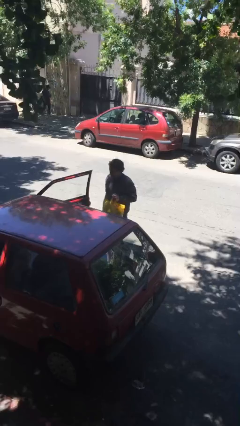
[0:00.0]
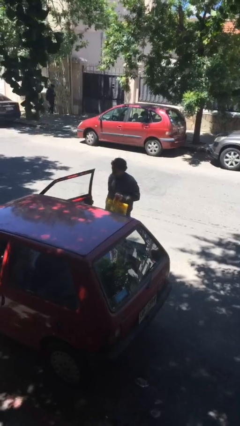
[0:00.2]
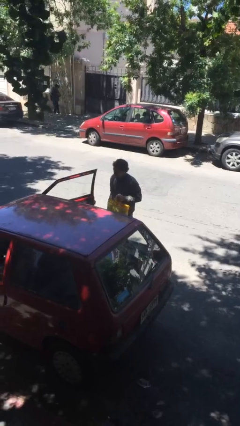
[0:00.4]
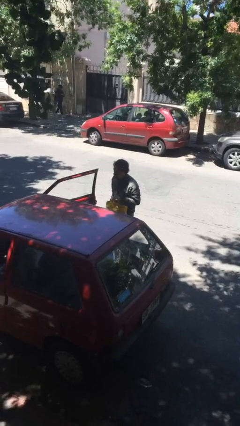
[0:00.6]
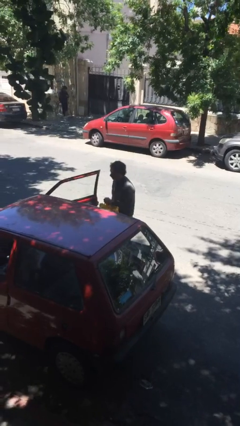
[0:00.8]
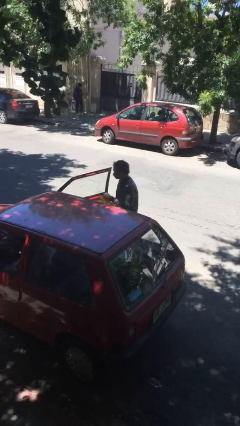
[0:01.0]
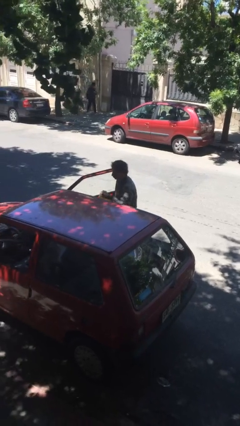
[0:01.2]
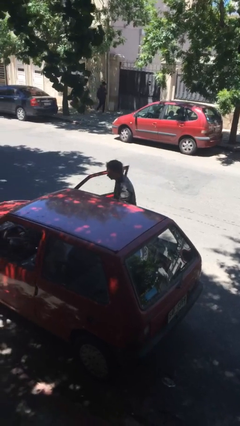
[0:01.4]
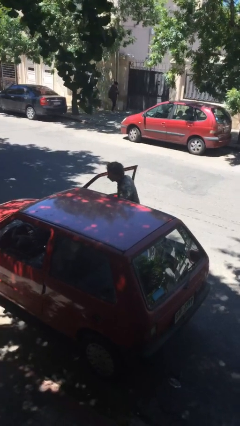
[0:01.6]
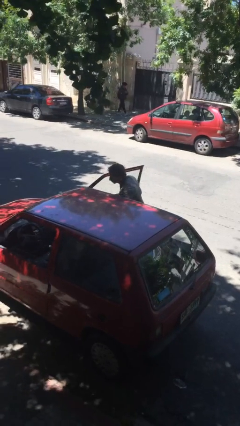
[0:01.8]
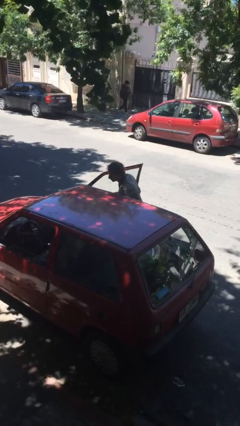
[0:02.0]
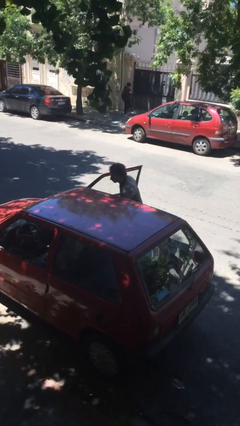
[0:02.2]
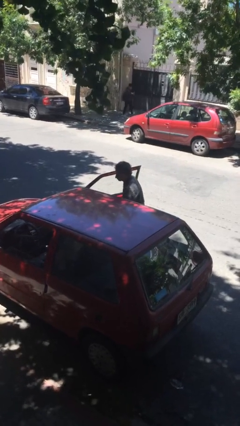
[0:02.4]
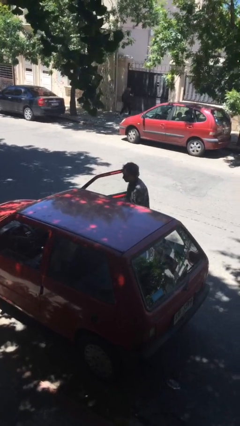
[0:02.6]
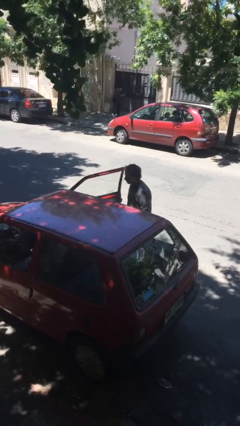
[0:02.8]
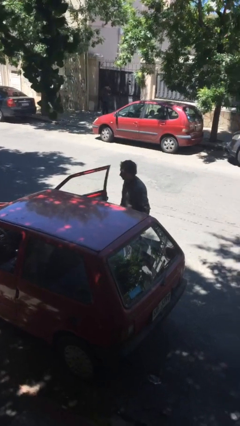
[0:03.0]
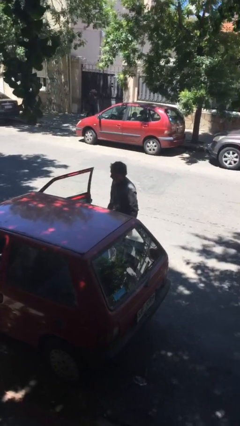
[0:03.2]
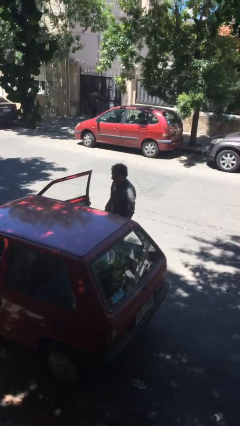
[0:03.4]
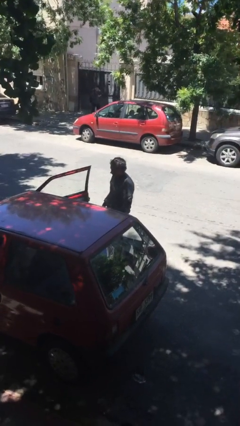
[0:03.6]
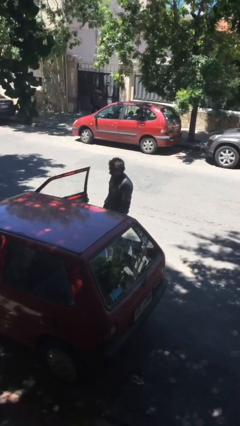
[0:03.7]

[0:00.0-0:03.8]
person loads car

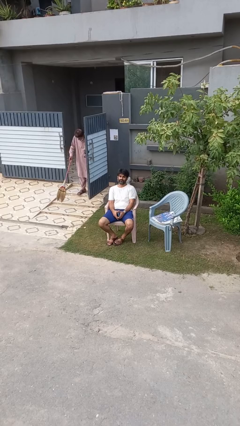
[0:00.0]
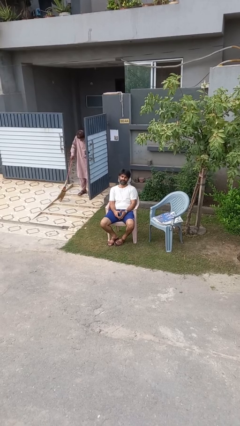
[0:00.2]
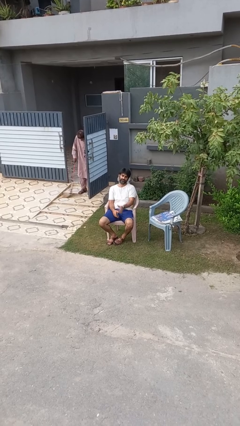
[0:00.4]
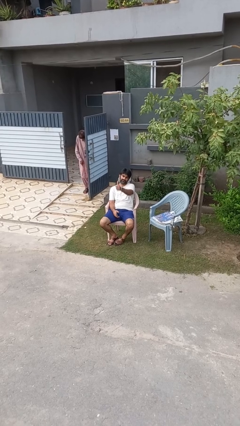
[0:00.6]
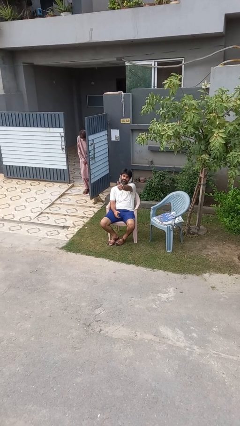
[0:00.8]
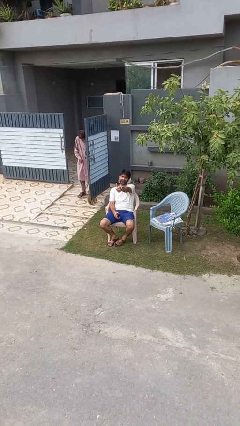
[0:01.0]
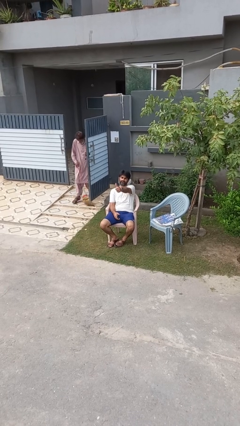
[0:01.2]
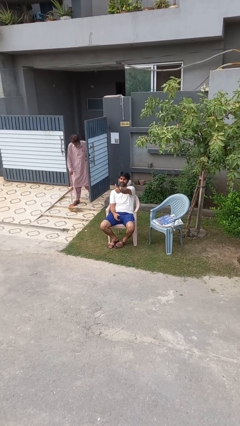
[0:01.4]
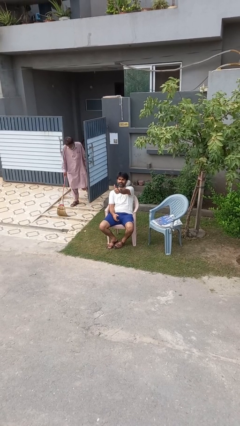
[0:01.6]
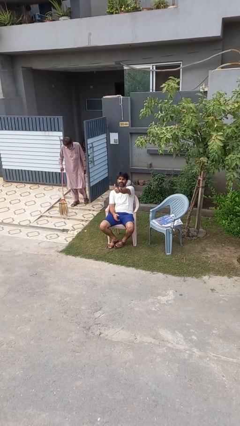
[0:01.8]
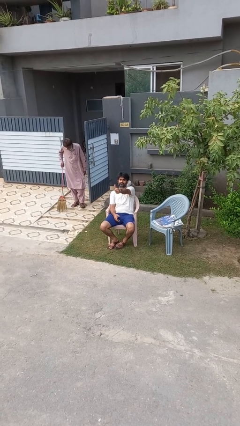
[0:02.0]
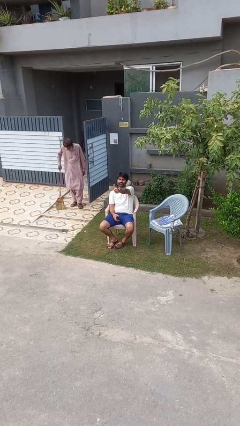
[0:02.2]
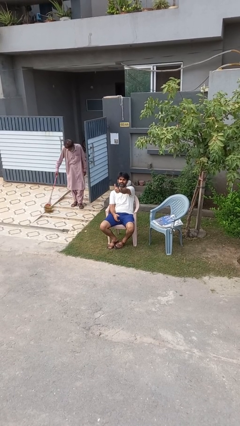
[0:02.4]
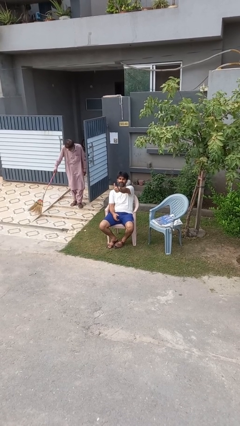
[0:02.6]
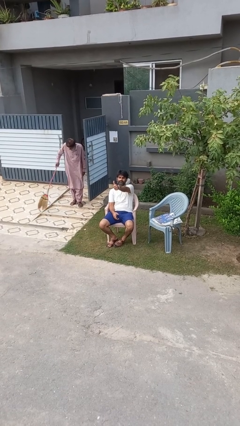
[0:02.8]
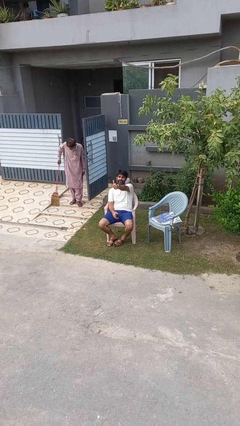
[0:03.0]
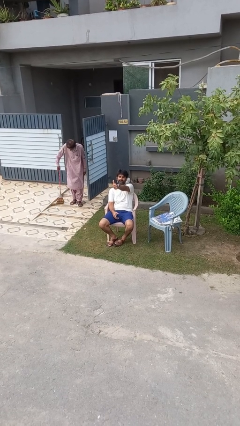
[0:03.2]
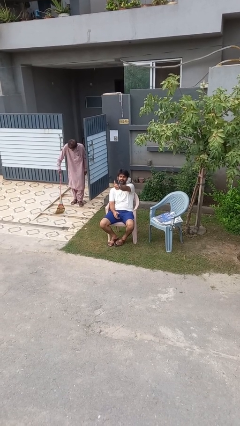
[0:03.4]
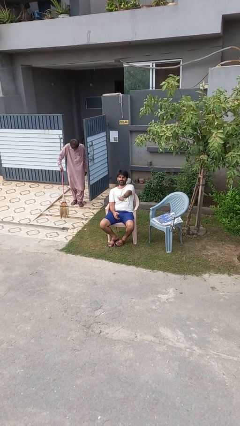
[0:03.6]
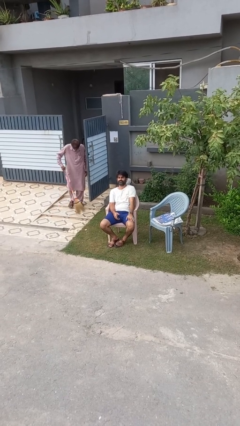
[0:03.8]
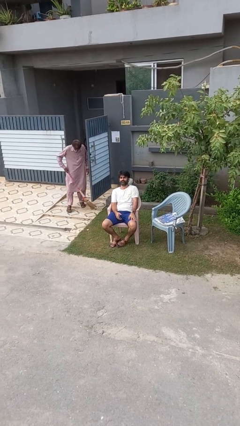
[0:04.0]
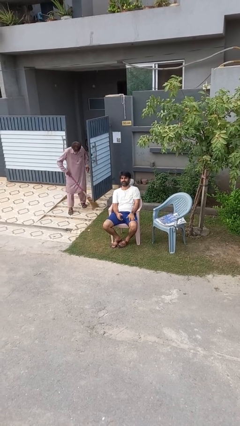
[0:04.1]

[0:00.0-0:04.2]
person gestures thumbs up

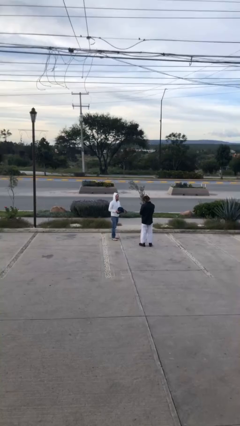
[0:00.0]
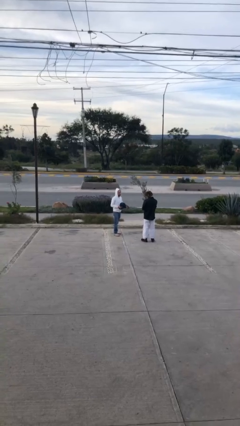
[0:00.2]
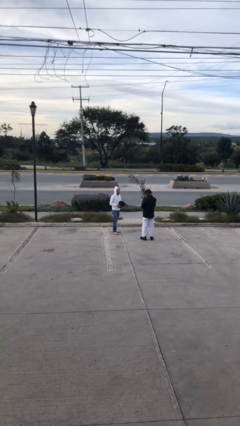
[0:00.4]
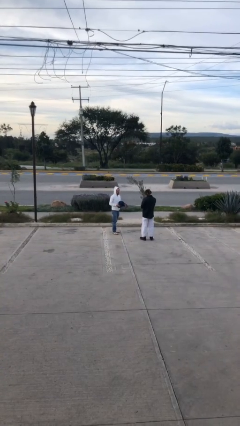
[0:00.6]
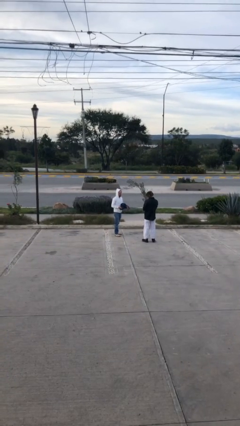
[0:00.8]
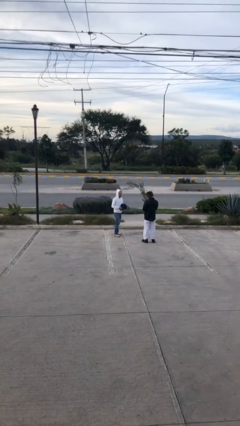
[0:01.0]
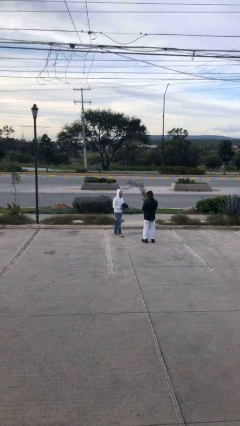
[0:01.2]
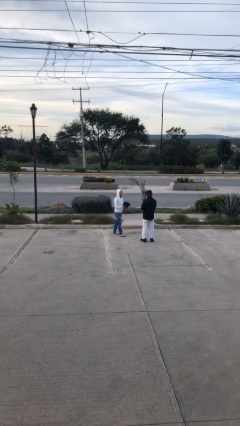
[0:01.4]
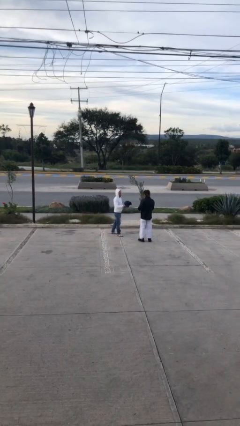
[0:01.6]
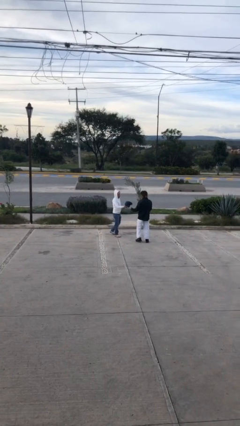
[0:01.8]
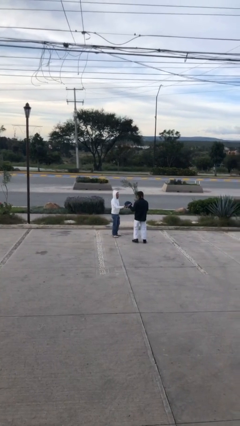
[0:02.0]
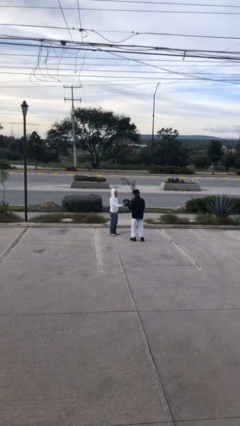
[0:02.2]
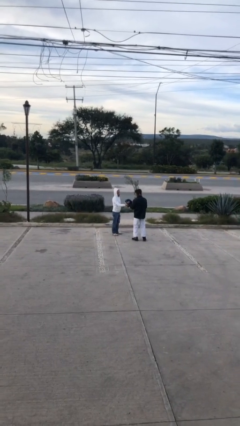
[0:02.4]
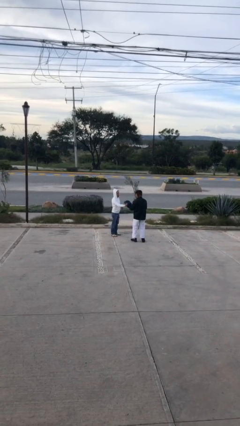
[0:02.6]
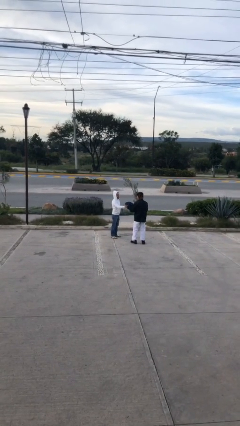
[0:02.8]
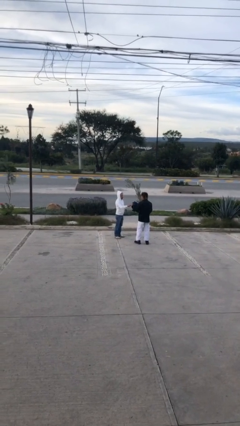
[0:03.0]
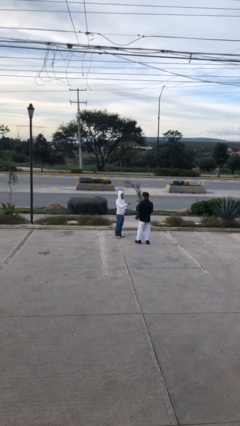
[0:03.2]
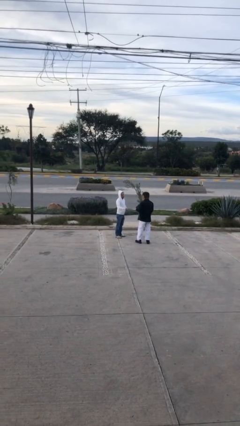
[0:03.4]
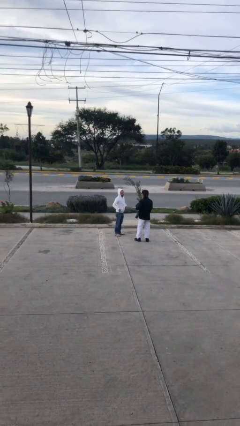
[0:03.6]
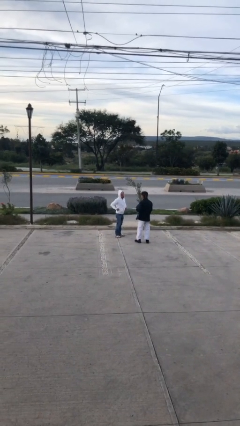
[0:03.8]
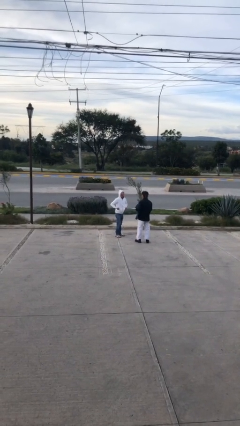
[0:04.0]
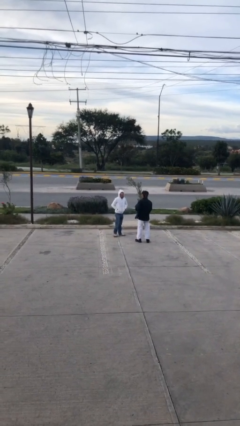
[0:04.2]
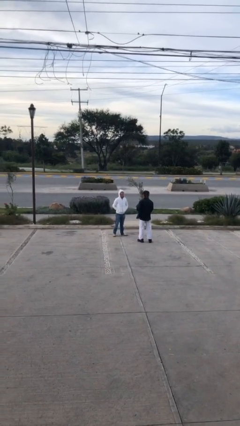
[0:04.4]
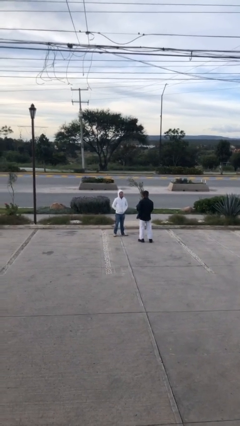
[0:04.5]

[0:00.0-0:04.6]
person transfers object to person

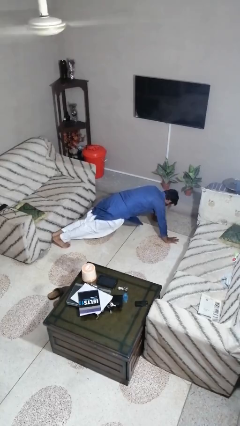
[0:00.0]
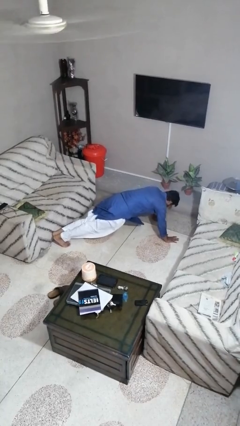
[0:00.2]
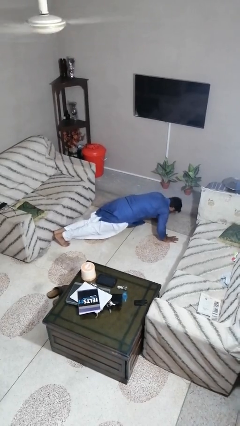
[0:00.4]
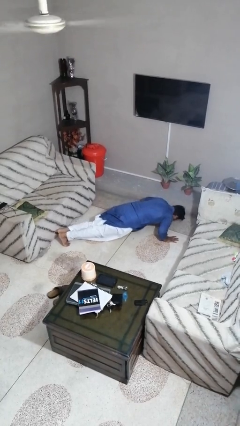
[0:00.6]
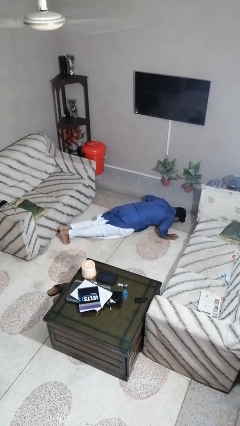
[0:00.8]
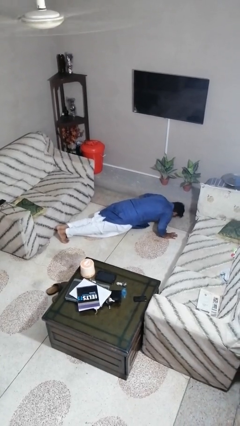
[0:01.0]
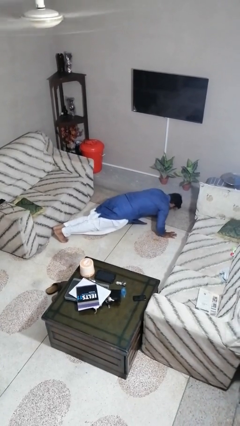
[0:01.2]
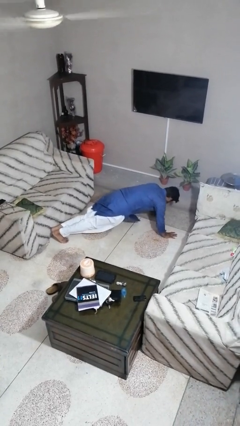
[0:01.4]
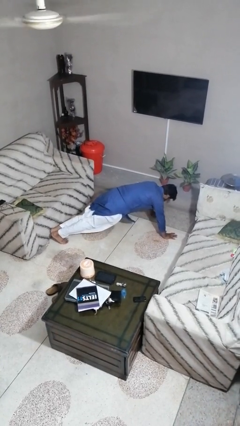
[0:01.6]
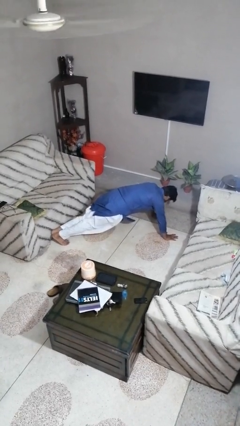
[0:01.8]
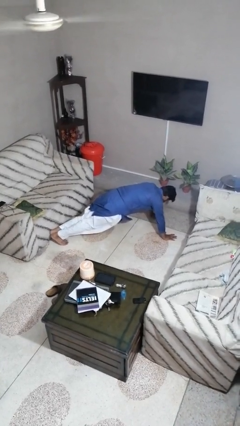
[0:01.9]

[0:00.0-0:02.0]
person exercises with pushup

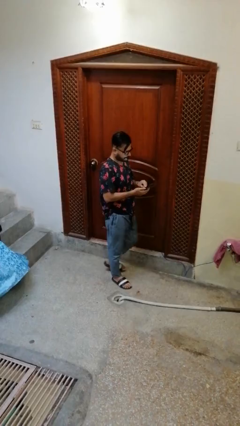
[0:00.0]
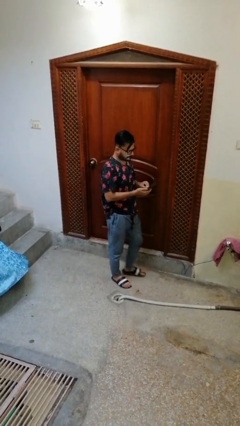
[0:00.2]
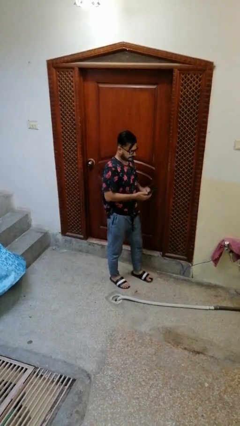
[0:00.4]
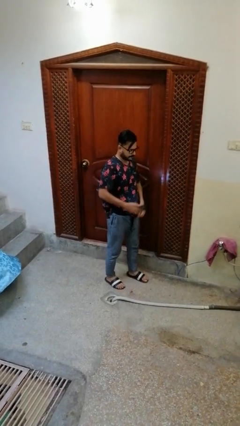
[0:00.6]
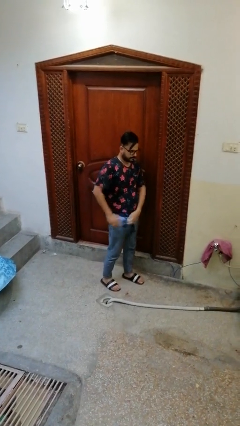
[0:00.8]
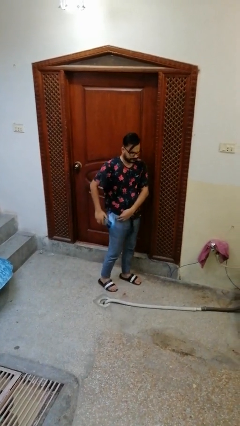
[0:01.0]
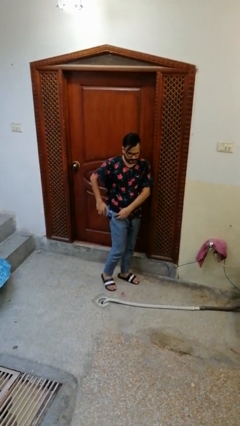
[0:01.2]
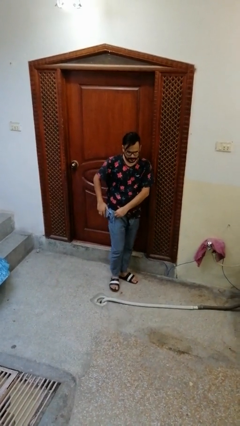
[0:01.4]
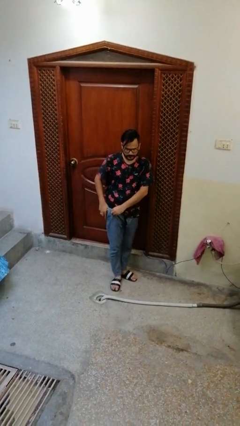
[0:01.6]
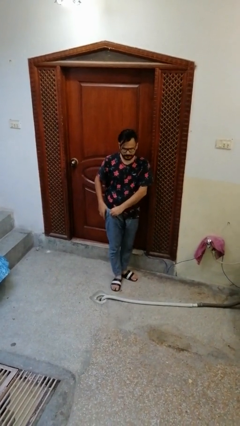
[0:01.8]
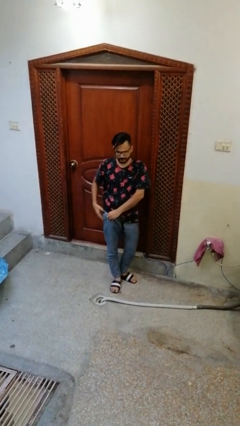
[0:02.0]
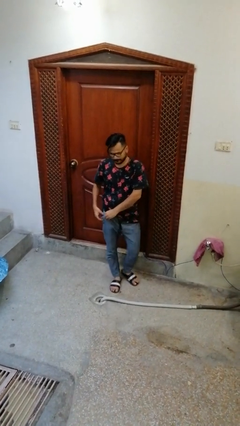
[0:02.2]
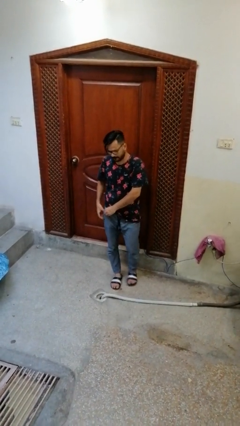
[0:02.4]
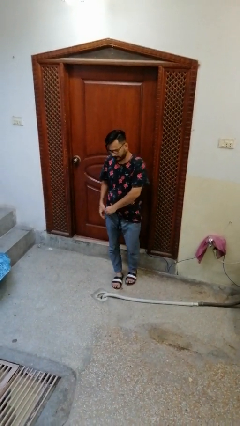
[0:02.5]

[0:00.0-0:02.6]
person puts phone into pocket

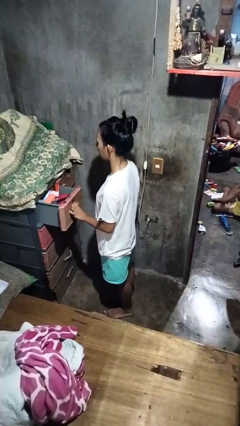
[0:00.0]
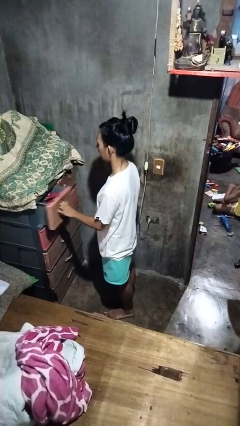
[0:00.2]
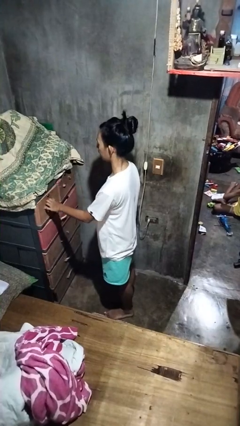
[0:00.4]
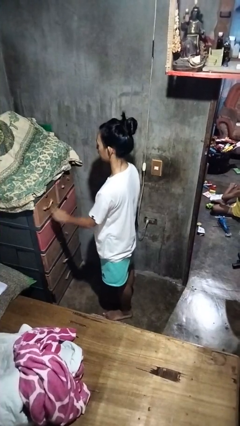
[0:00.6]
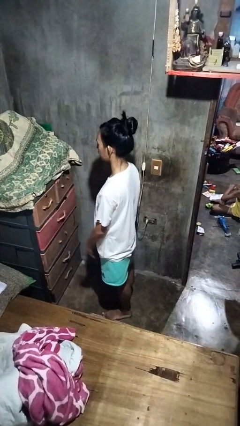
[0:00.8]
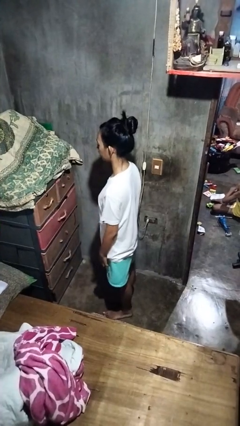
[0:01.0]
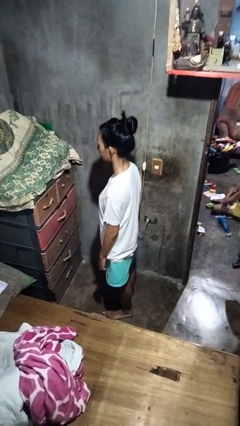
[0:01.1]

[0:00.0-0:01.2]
person closes dresser drawer
